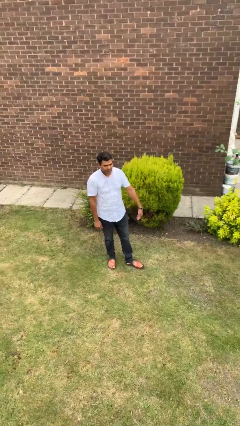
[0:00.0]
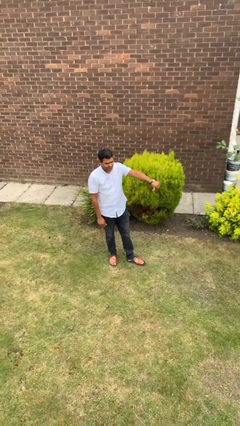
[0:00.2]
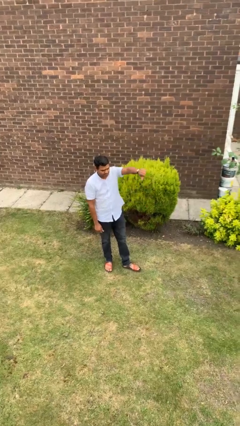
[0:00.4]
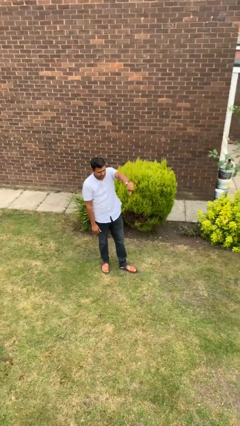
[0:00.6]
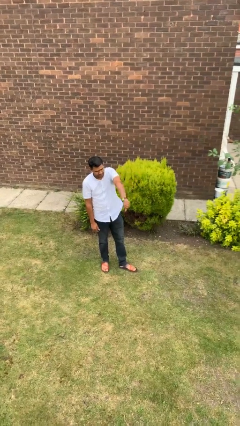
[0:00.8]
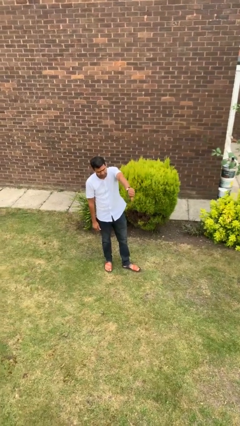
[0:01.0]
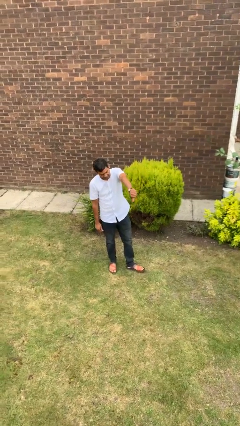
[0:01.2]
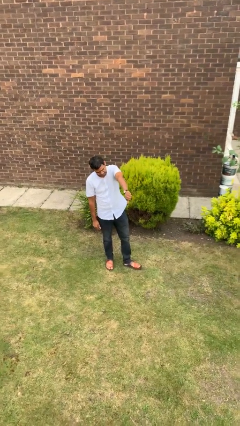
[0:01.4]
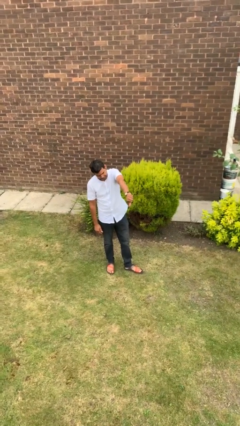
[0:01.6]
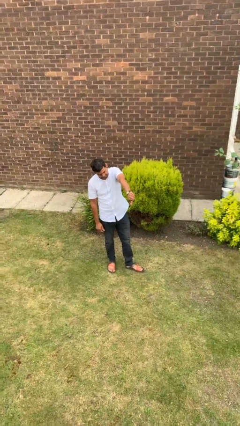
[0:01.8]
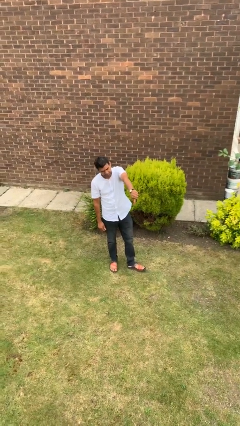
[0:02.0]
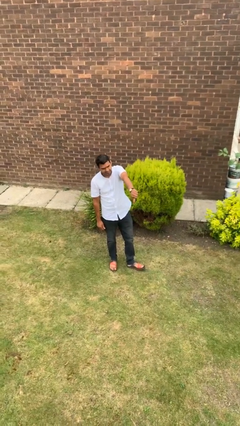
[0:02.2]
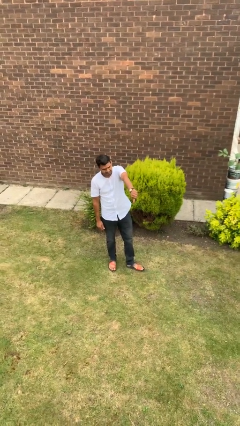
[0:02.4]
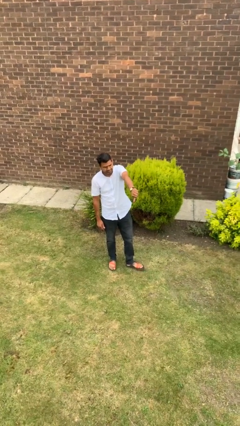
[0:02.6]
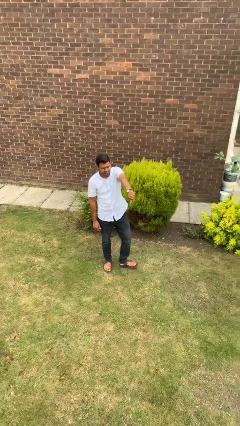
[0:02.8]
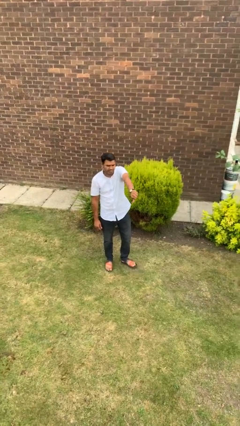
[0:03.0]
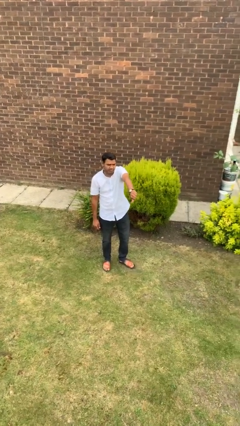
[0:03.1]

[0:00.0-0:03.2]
person gestures thumbs down

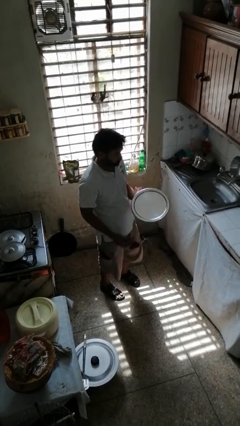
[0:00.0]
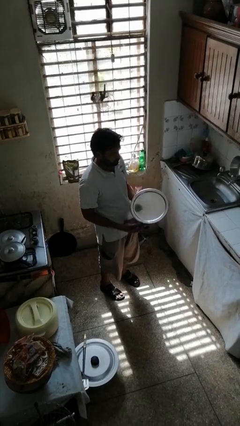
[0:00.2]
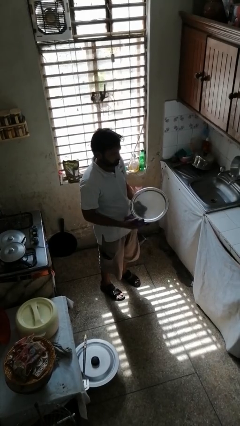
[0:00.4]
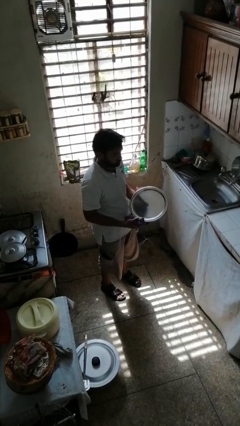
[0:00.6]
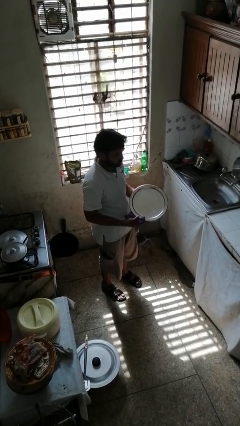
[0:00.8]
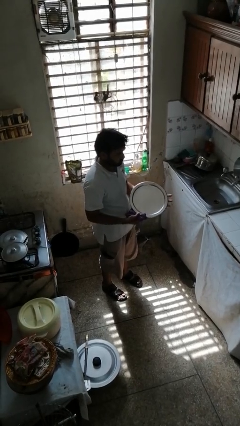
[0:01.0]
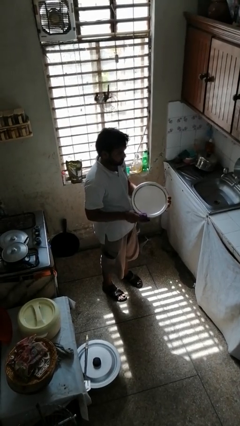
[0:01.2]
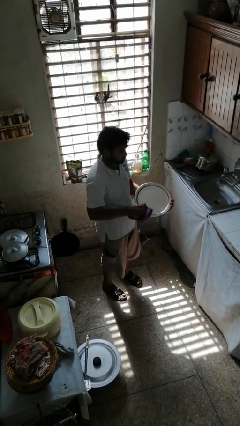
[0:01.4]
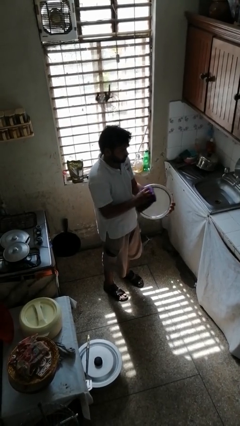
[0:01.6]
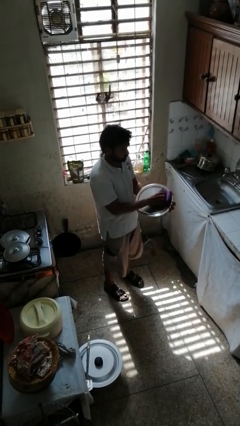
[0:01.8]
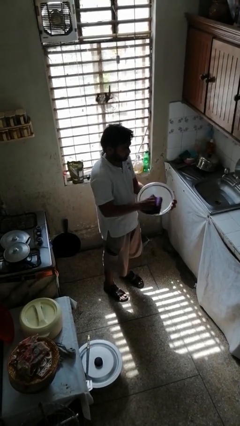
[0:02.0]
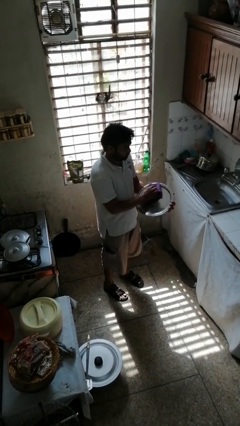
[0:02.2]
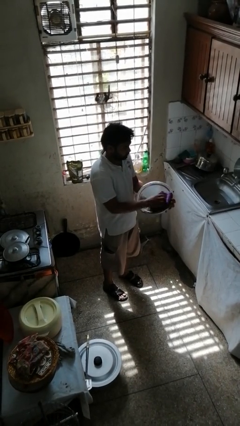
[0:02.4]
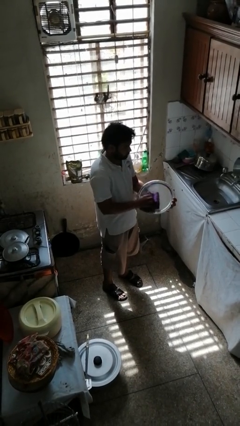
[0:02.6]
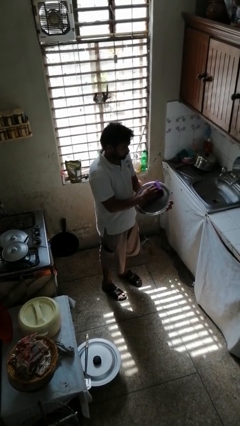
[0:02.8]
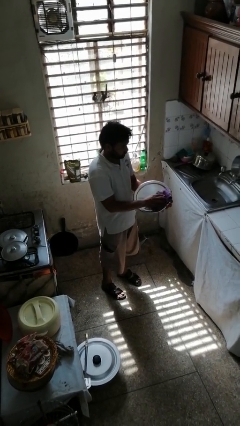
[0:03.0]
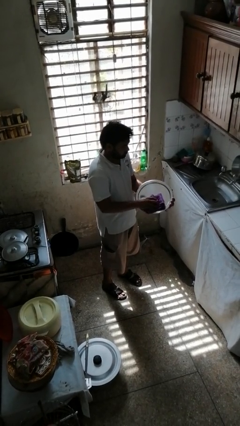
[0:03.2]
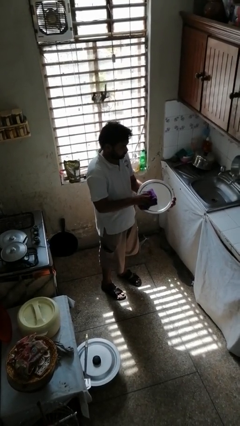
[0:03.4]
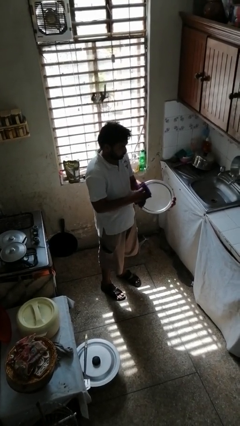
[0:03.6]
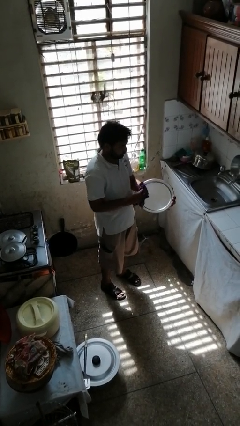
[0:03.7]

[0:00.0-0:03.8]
person dries dish

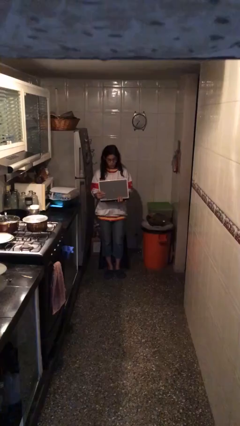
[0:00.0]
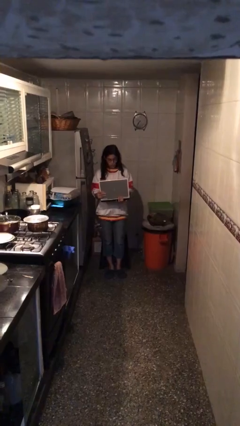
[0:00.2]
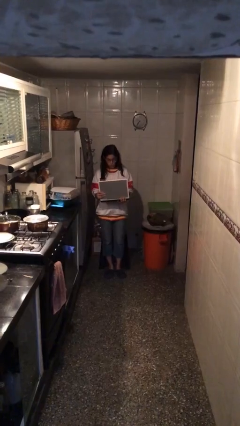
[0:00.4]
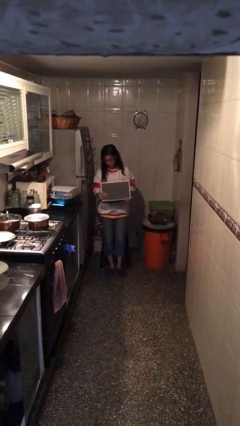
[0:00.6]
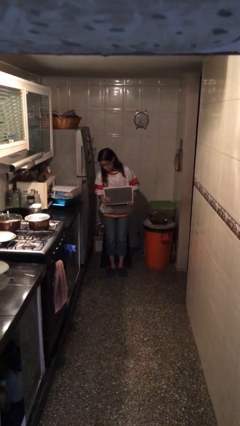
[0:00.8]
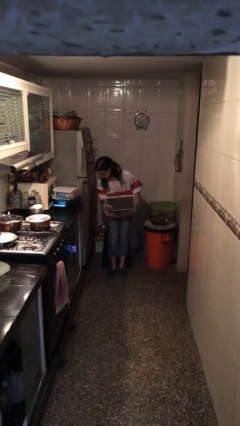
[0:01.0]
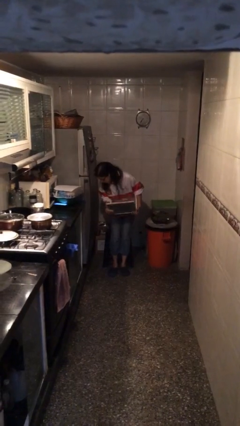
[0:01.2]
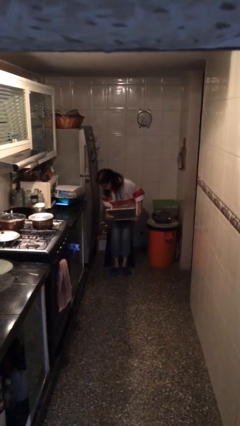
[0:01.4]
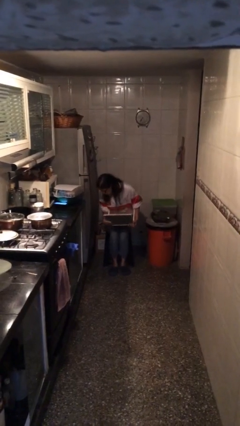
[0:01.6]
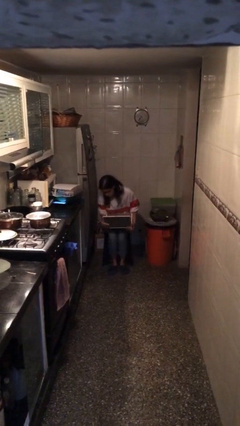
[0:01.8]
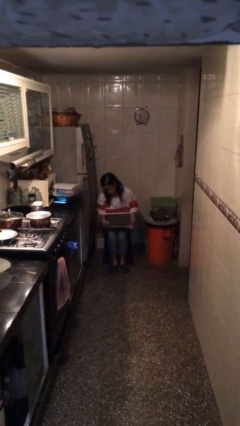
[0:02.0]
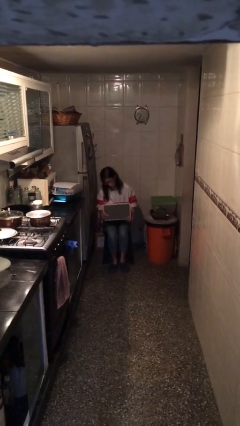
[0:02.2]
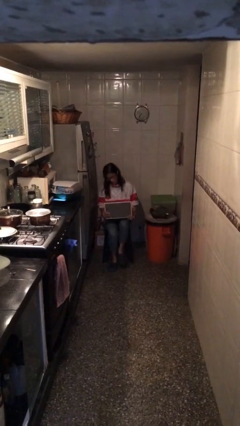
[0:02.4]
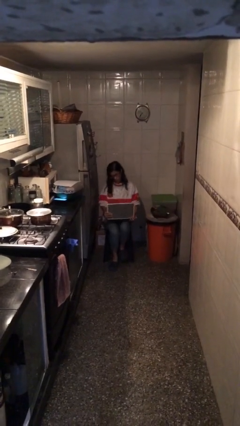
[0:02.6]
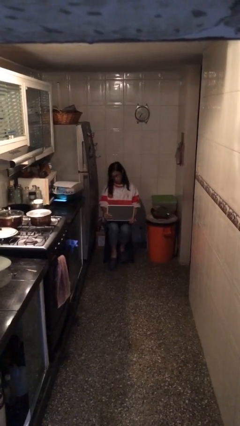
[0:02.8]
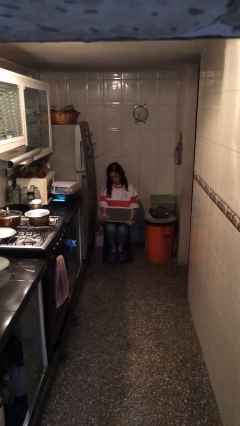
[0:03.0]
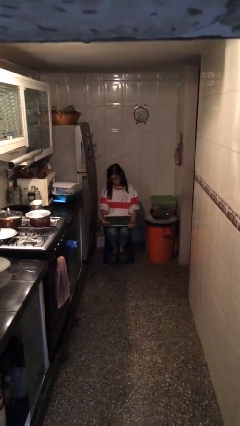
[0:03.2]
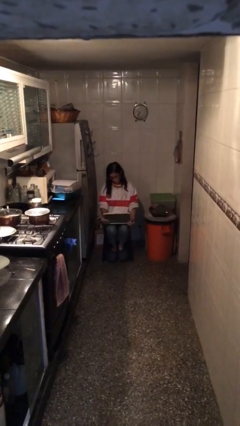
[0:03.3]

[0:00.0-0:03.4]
person sits down

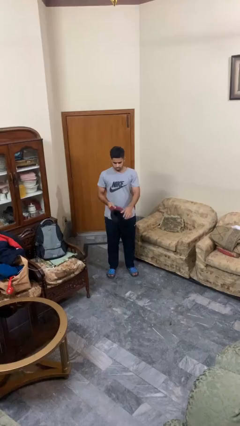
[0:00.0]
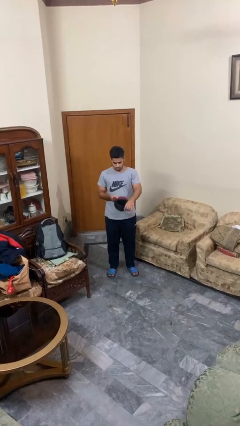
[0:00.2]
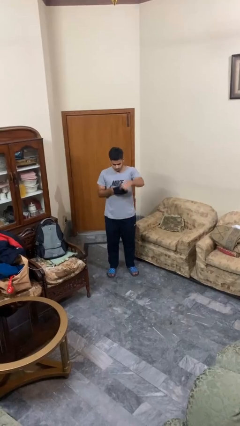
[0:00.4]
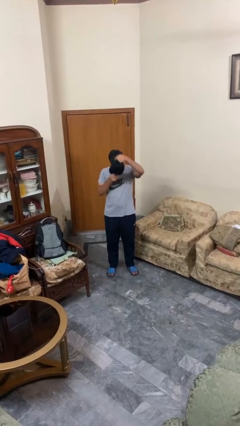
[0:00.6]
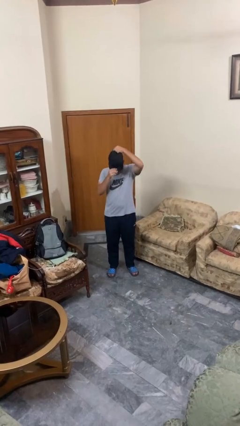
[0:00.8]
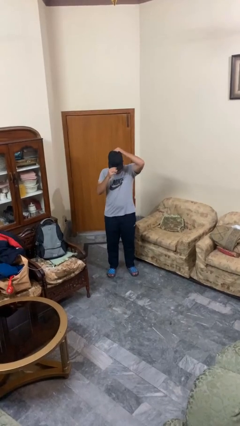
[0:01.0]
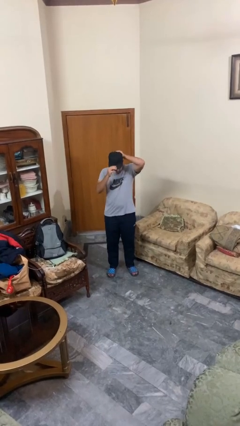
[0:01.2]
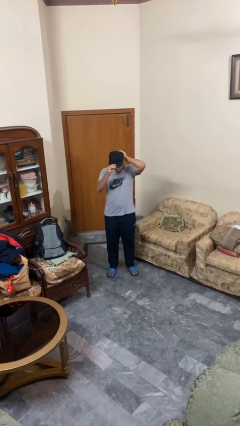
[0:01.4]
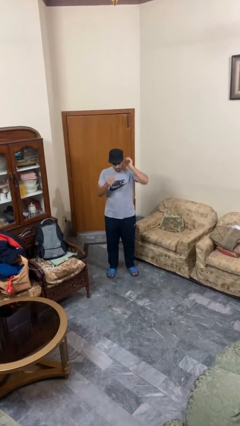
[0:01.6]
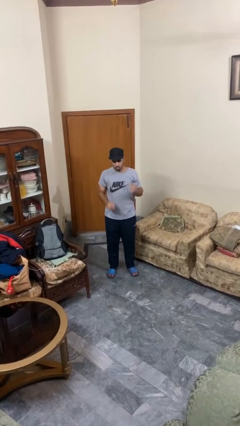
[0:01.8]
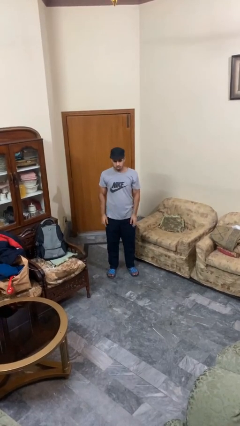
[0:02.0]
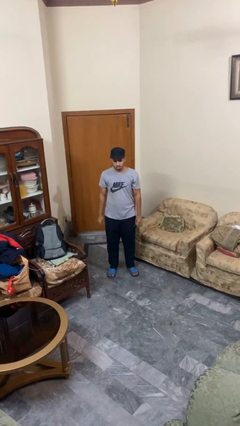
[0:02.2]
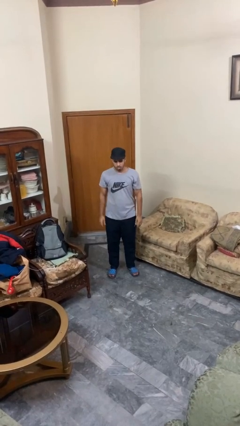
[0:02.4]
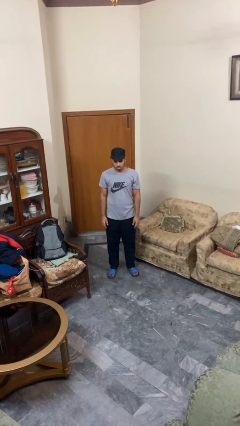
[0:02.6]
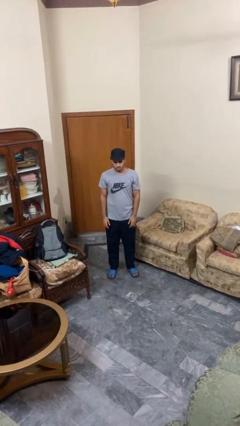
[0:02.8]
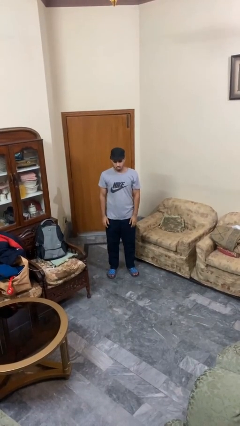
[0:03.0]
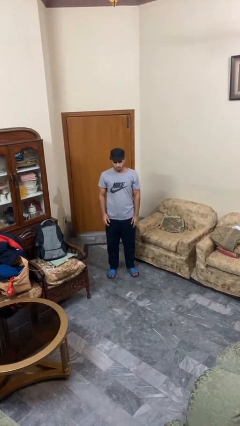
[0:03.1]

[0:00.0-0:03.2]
person puts on hat

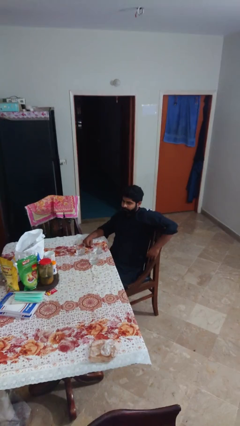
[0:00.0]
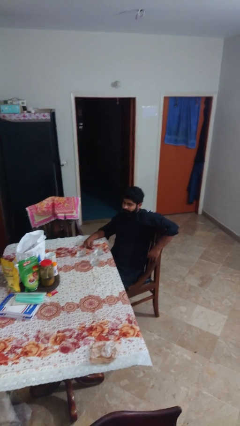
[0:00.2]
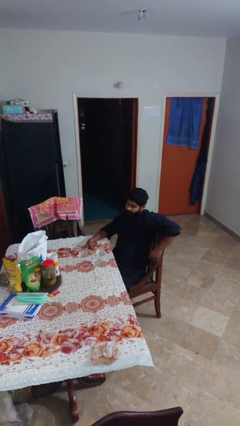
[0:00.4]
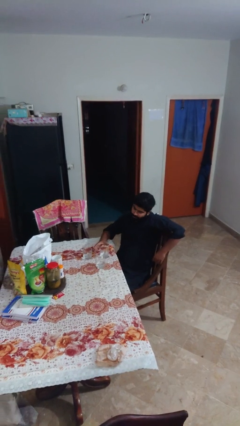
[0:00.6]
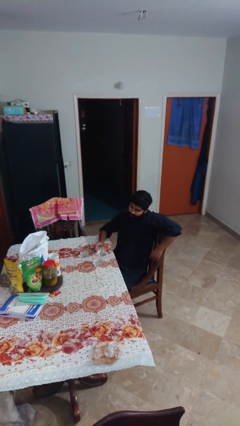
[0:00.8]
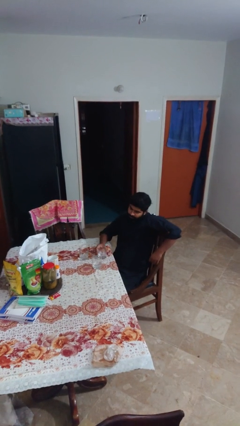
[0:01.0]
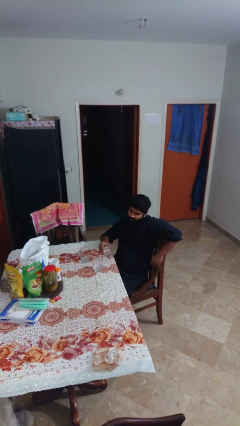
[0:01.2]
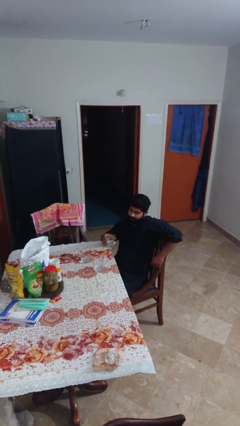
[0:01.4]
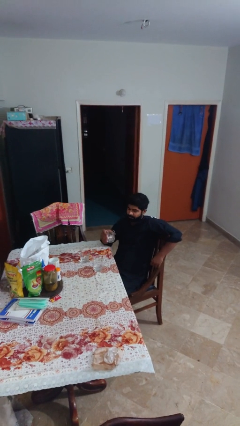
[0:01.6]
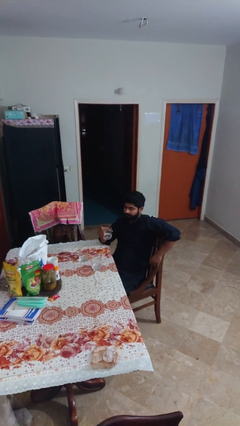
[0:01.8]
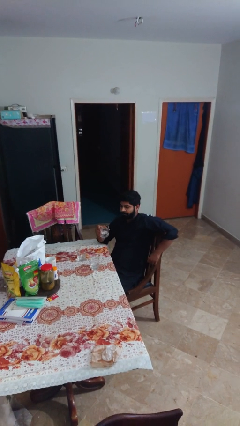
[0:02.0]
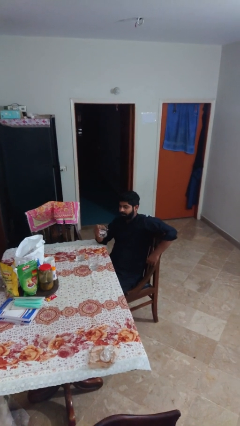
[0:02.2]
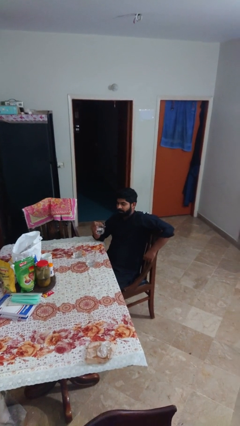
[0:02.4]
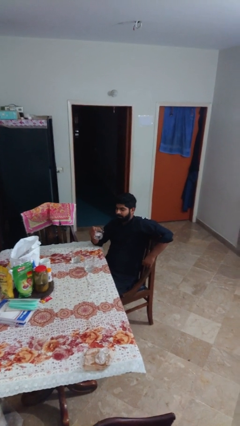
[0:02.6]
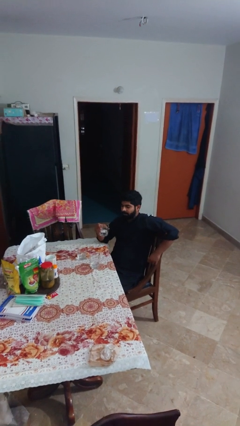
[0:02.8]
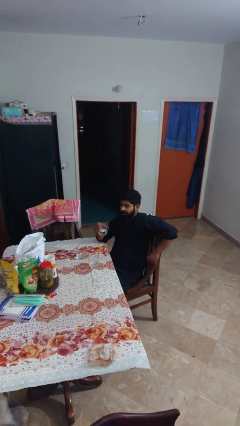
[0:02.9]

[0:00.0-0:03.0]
person picks up object from table

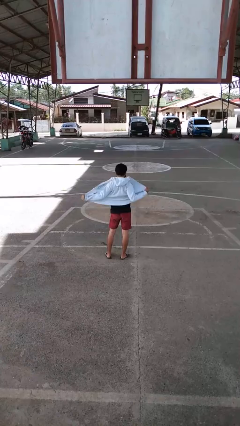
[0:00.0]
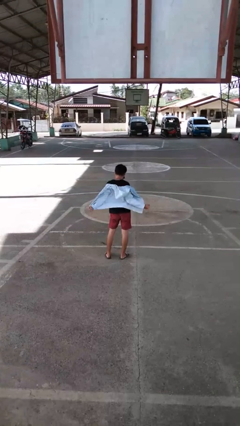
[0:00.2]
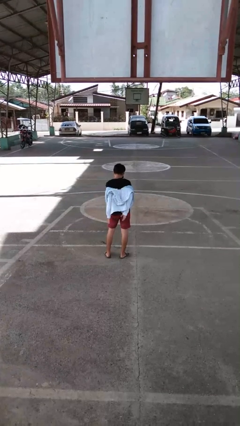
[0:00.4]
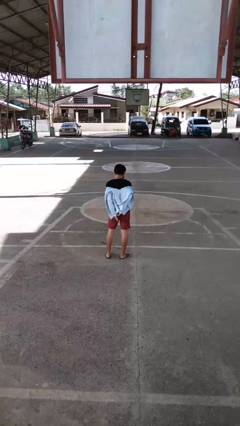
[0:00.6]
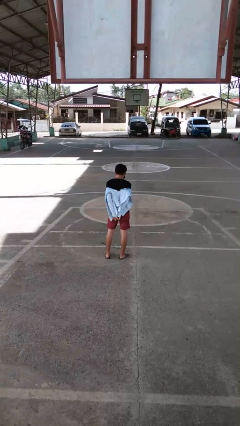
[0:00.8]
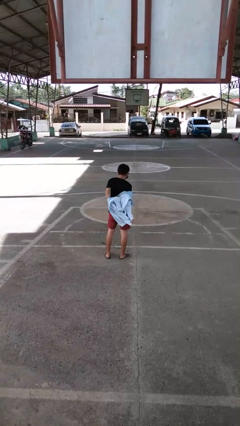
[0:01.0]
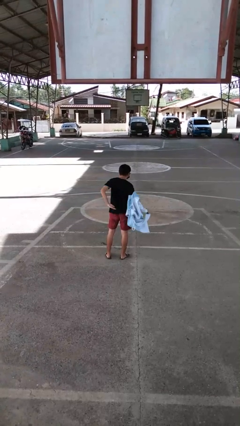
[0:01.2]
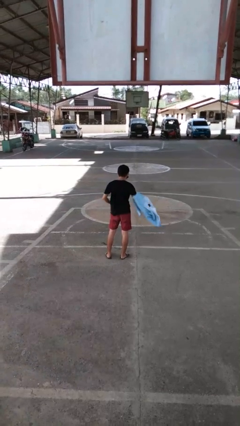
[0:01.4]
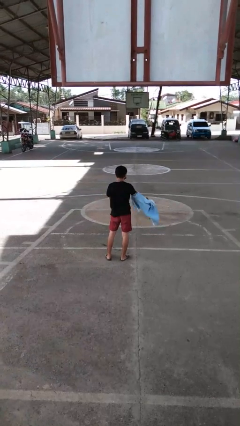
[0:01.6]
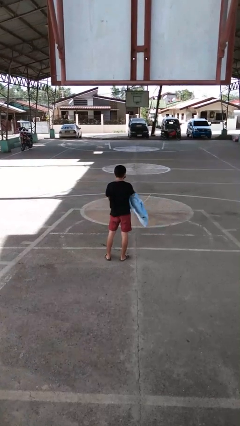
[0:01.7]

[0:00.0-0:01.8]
person takes off jacket
